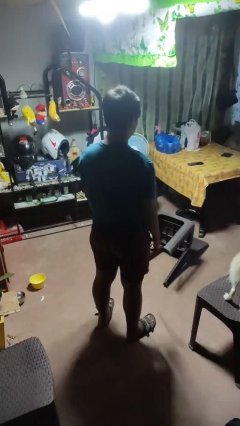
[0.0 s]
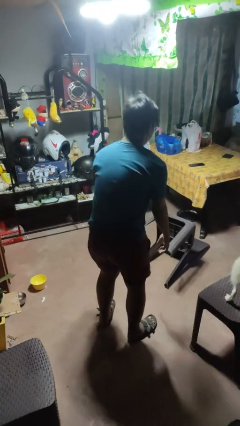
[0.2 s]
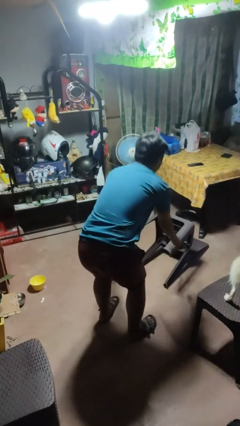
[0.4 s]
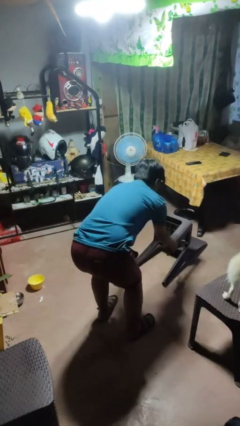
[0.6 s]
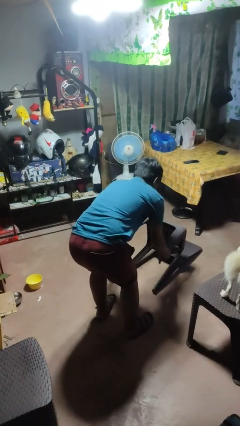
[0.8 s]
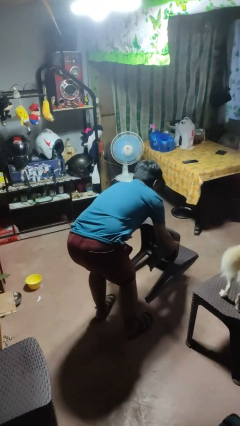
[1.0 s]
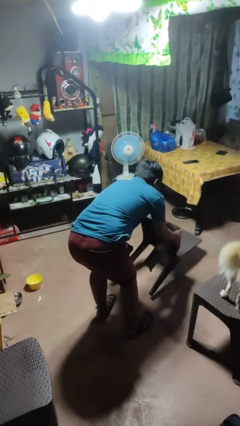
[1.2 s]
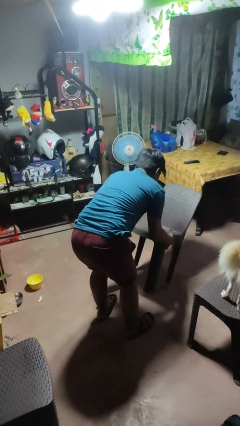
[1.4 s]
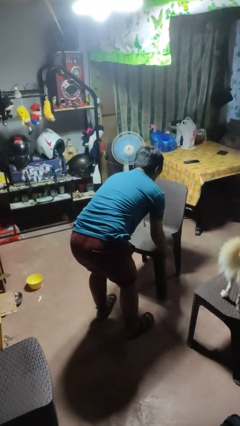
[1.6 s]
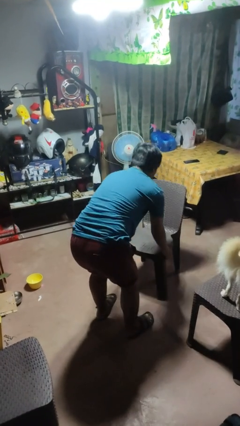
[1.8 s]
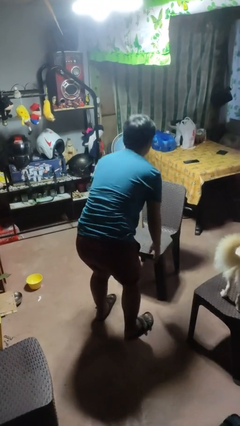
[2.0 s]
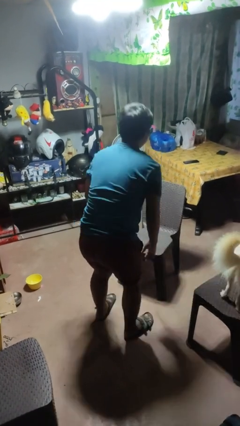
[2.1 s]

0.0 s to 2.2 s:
person sets upright furniture

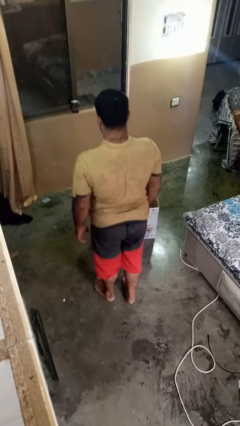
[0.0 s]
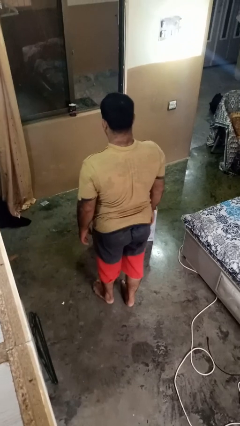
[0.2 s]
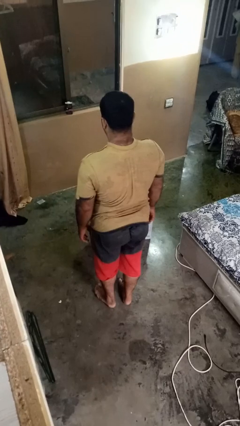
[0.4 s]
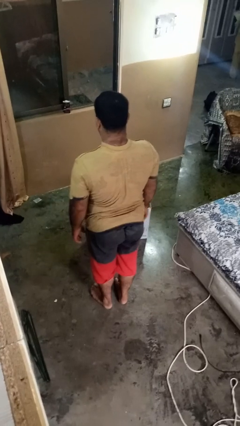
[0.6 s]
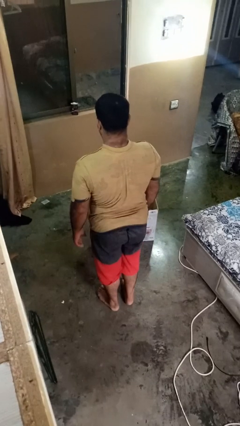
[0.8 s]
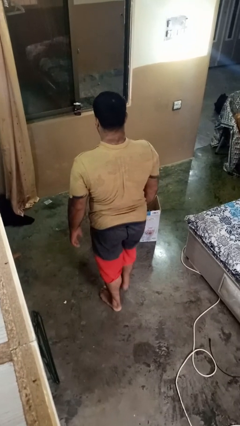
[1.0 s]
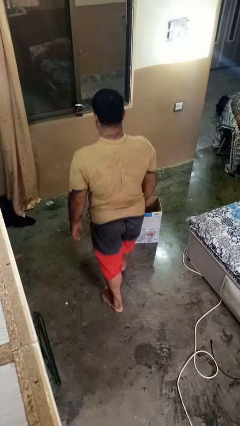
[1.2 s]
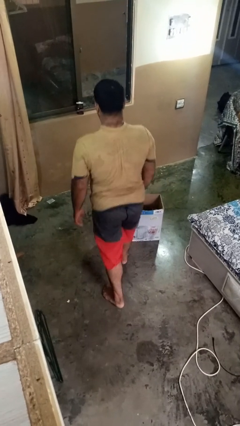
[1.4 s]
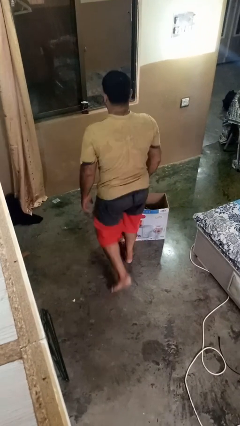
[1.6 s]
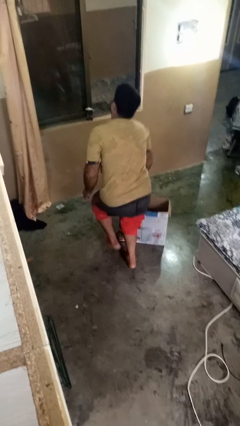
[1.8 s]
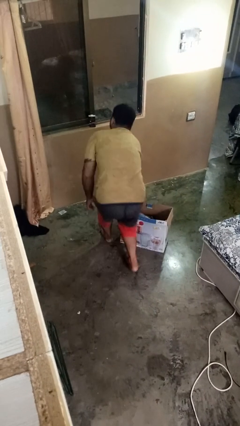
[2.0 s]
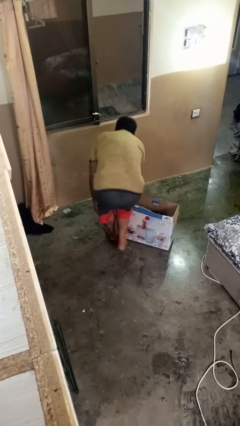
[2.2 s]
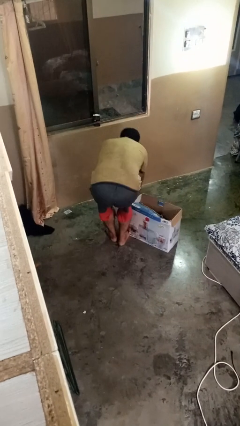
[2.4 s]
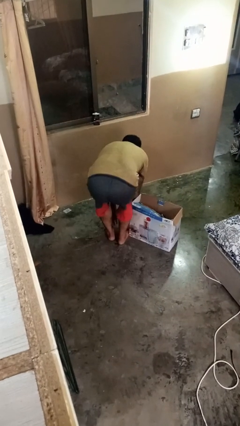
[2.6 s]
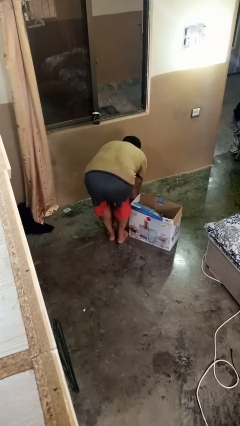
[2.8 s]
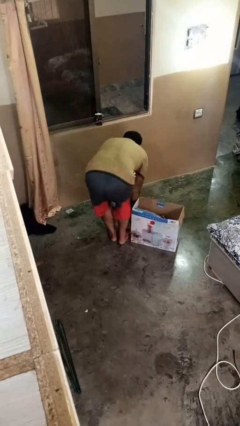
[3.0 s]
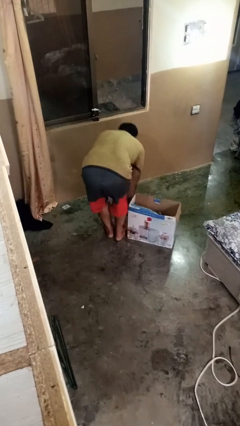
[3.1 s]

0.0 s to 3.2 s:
person trips on object on floor

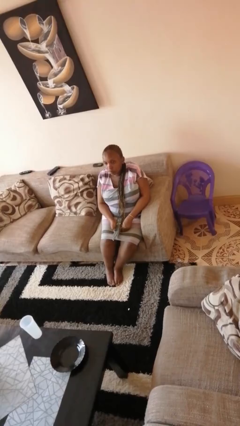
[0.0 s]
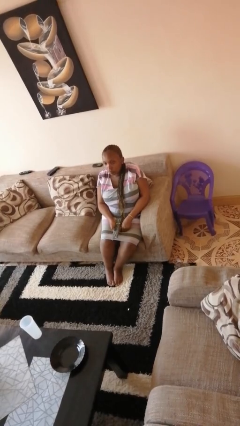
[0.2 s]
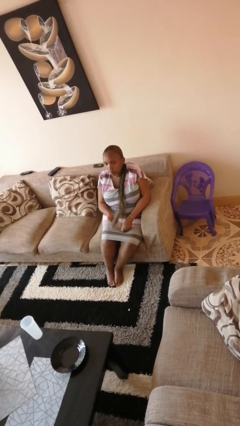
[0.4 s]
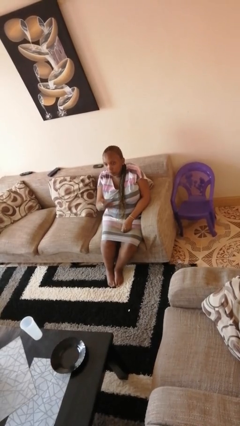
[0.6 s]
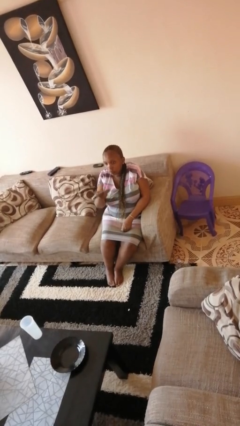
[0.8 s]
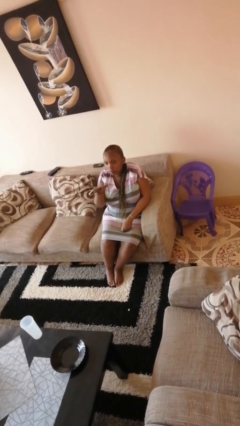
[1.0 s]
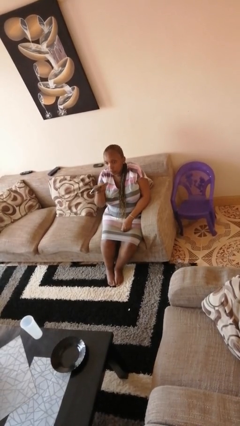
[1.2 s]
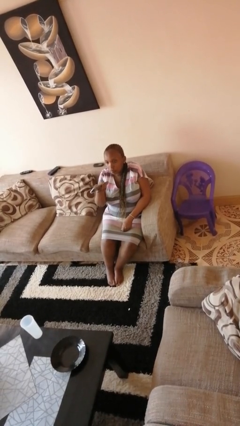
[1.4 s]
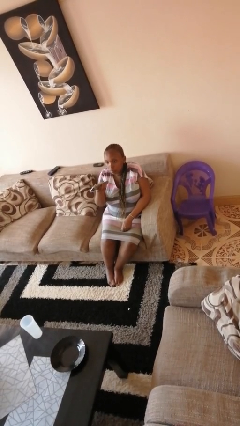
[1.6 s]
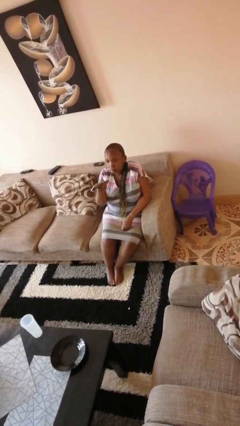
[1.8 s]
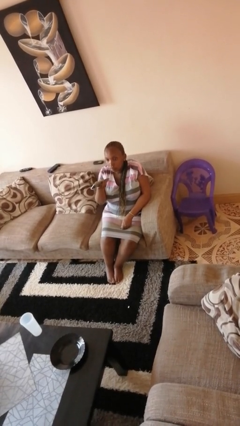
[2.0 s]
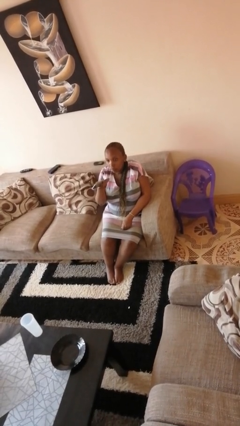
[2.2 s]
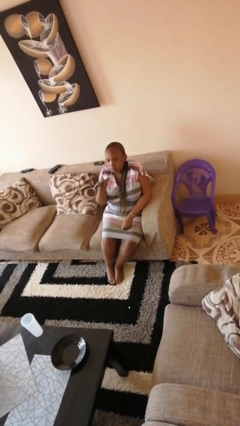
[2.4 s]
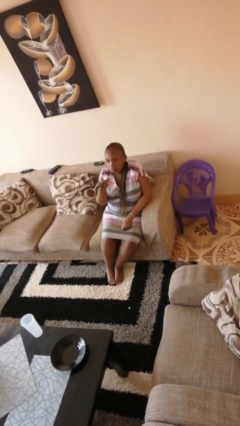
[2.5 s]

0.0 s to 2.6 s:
person uses television remote

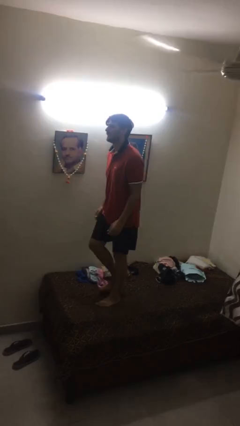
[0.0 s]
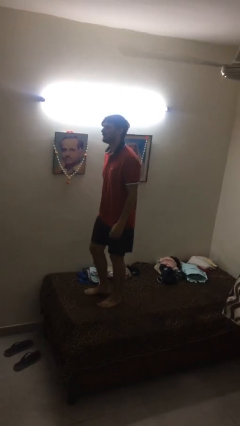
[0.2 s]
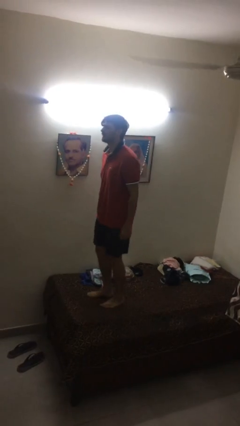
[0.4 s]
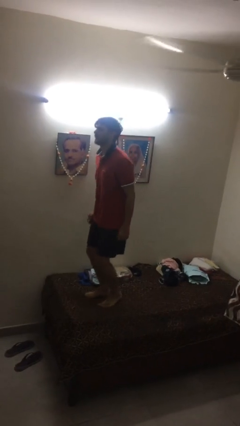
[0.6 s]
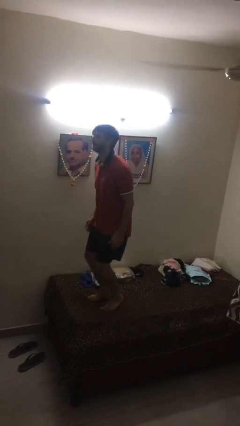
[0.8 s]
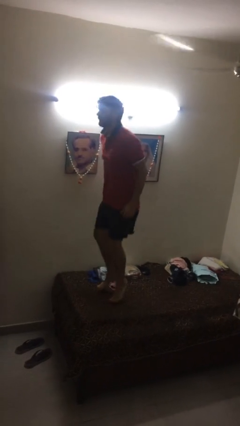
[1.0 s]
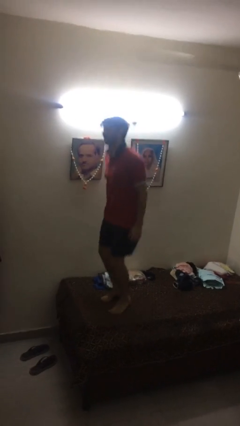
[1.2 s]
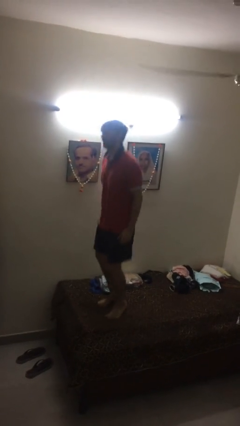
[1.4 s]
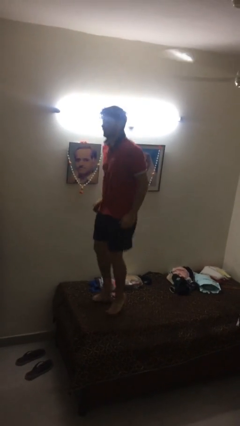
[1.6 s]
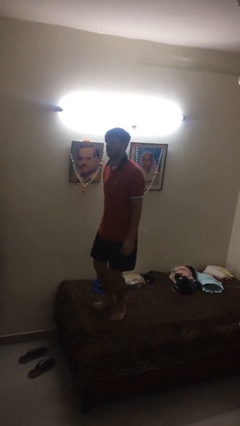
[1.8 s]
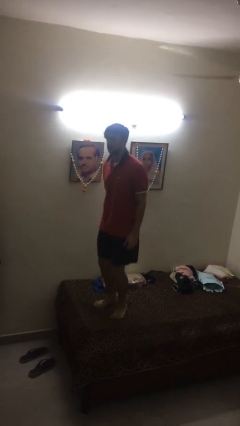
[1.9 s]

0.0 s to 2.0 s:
person jumps on bed

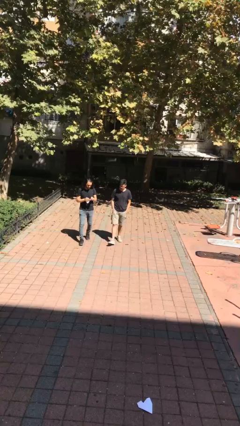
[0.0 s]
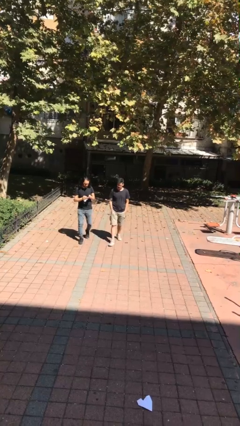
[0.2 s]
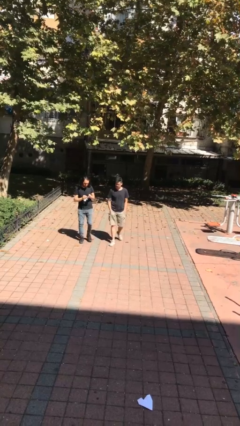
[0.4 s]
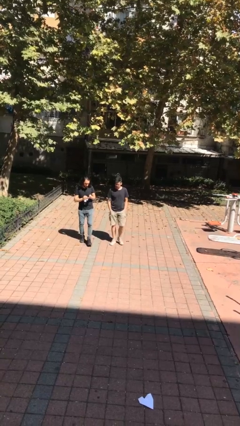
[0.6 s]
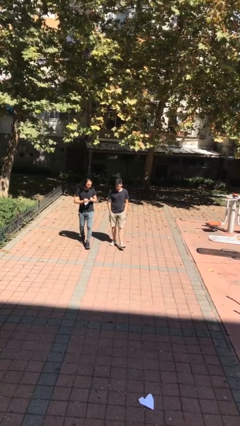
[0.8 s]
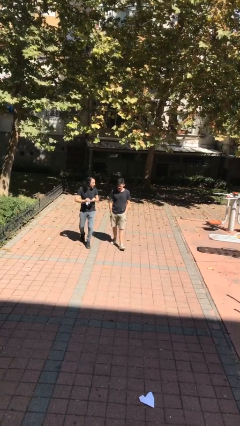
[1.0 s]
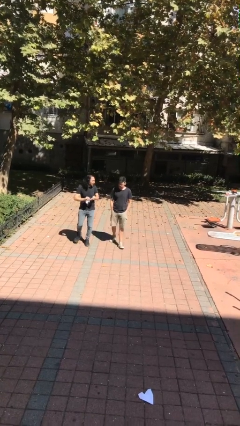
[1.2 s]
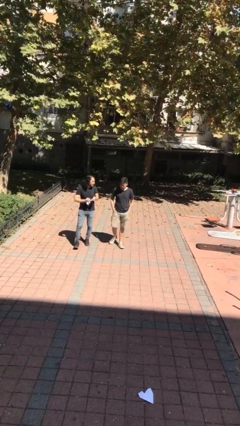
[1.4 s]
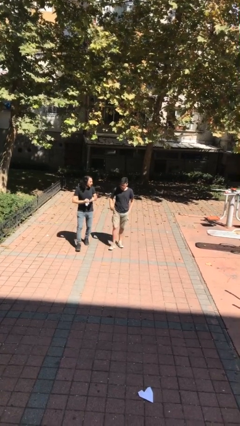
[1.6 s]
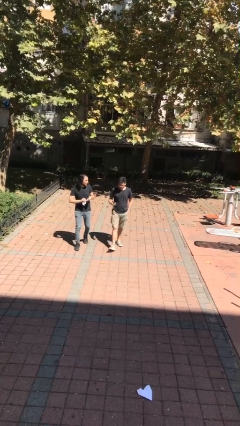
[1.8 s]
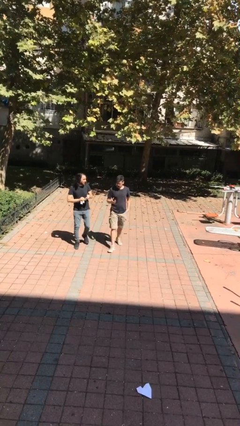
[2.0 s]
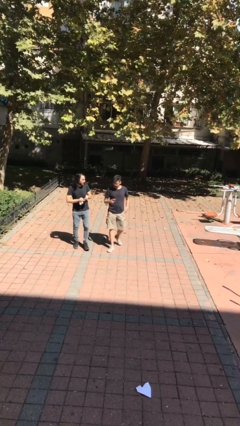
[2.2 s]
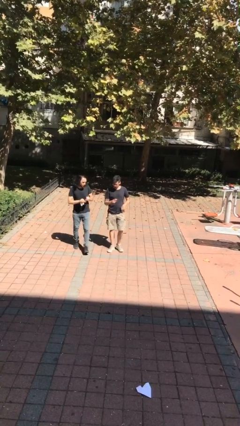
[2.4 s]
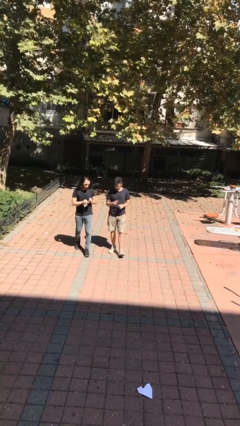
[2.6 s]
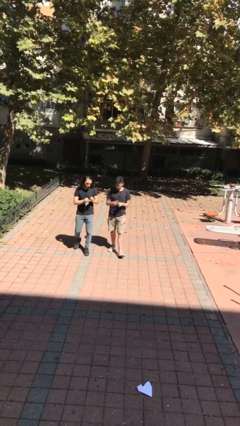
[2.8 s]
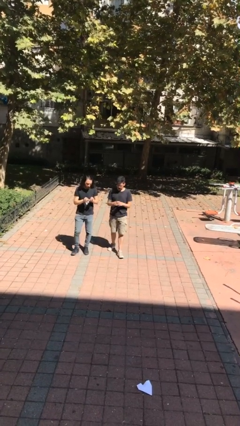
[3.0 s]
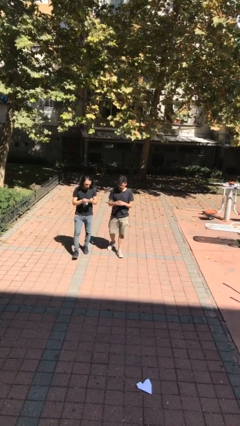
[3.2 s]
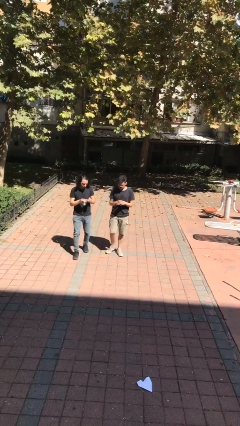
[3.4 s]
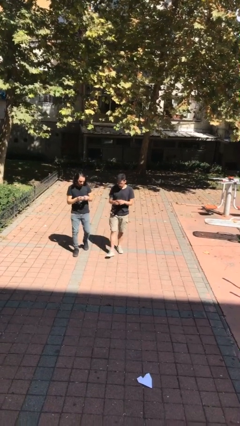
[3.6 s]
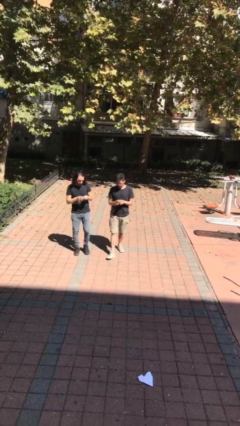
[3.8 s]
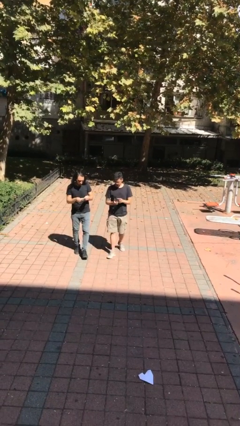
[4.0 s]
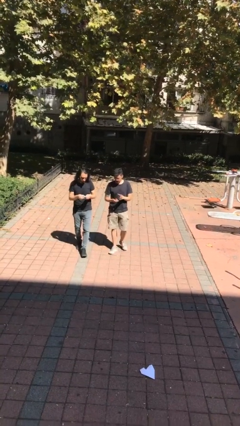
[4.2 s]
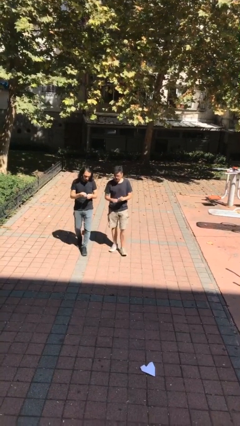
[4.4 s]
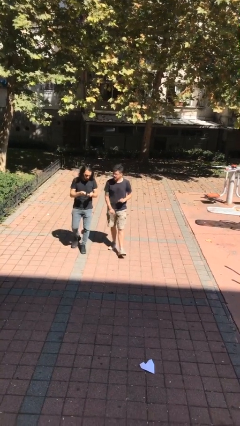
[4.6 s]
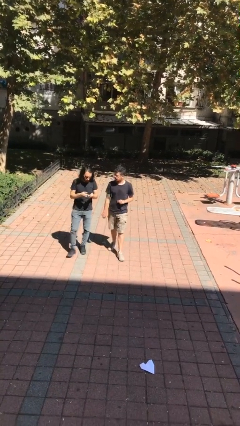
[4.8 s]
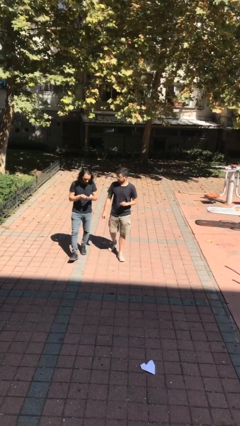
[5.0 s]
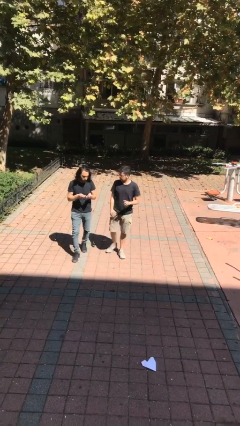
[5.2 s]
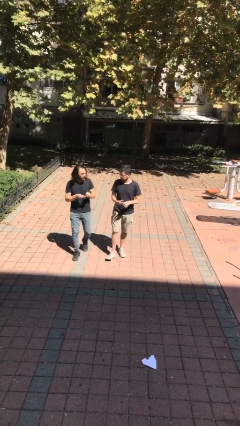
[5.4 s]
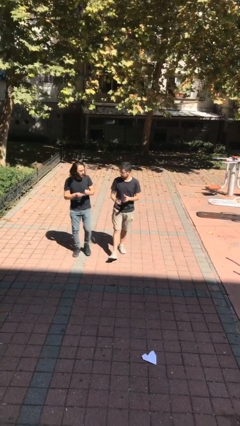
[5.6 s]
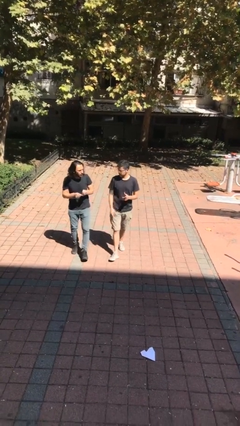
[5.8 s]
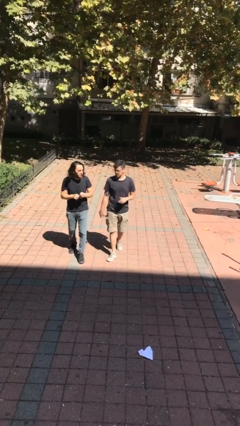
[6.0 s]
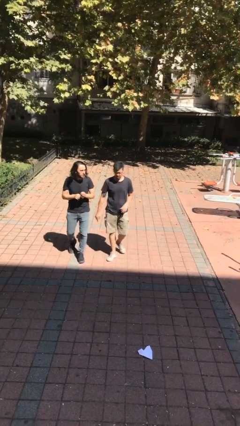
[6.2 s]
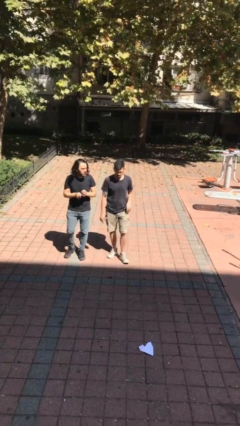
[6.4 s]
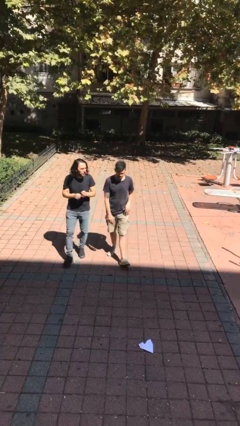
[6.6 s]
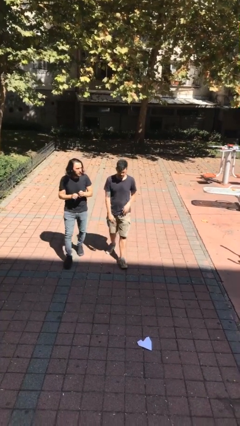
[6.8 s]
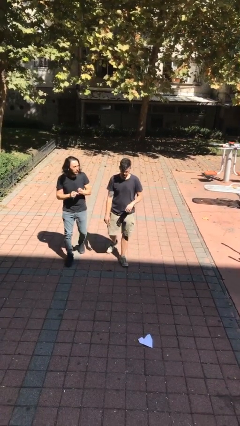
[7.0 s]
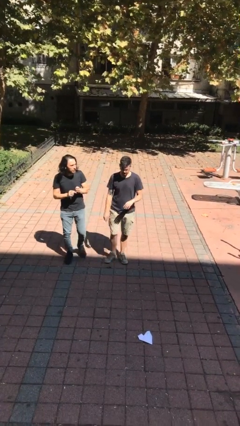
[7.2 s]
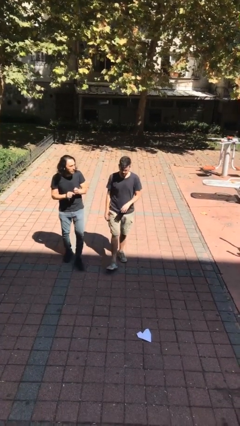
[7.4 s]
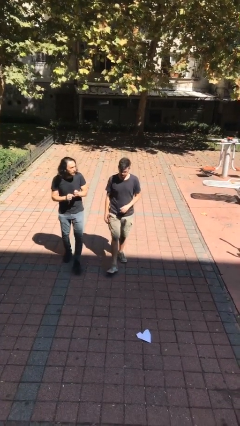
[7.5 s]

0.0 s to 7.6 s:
person talks to person
